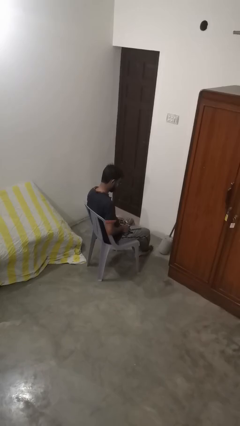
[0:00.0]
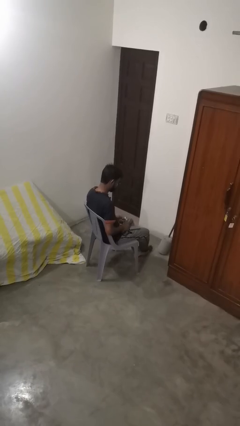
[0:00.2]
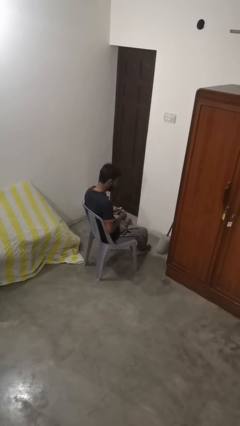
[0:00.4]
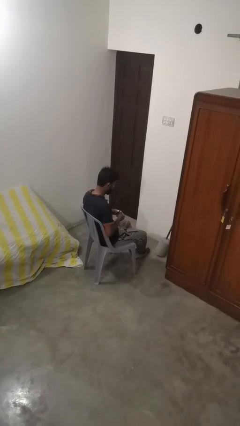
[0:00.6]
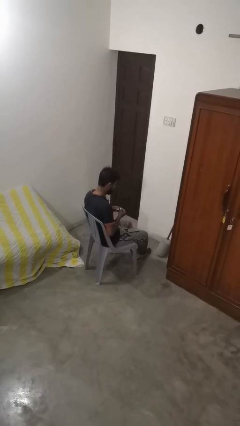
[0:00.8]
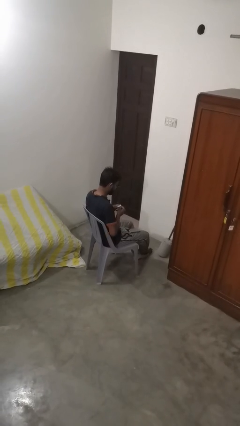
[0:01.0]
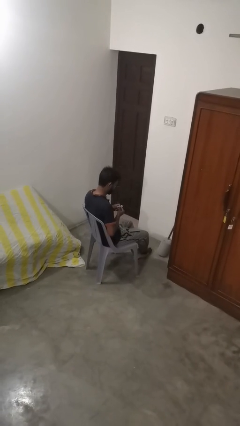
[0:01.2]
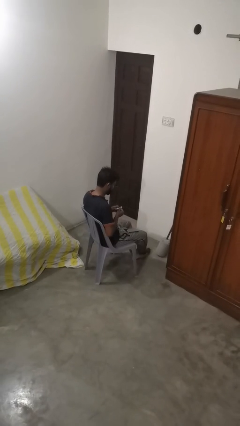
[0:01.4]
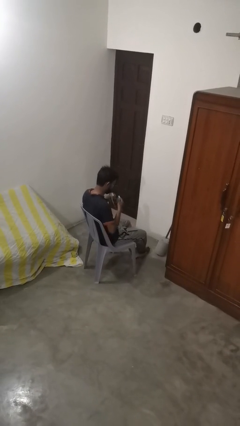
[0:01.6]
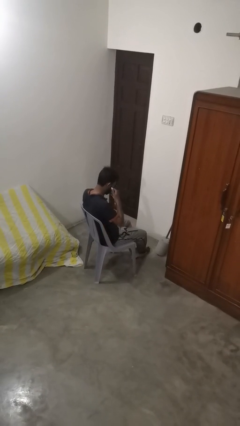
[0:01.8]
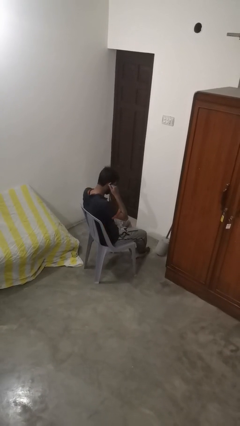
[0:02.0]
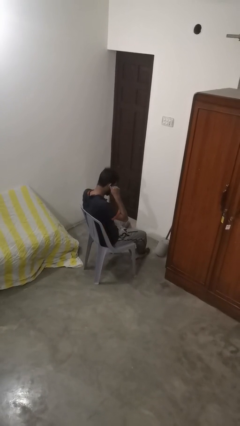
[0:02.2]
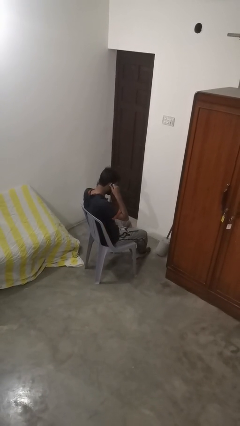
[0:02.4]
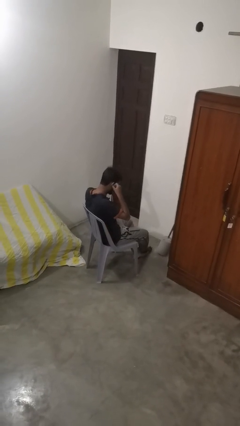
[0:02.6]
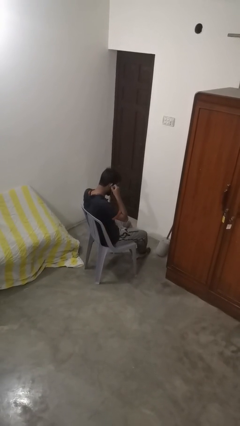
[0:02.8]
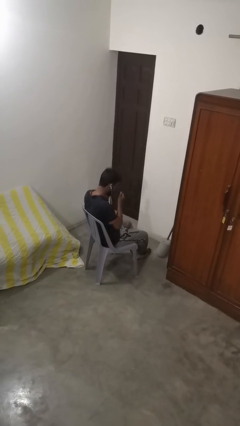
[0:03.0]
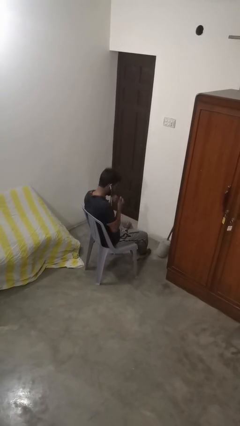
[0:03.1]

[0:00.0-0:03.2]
person puts on headphones

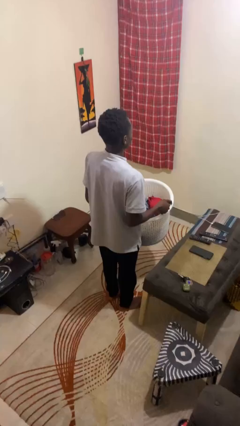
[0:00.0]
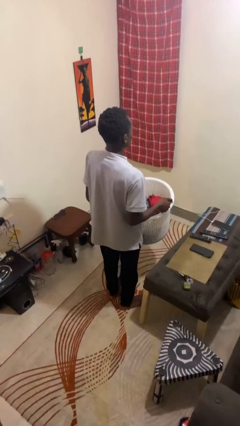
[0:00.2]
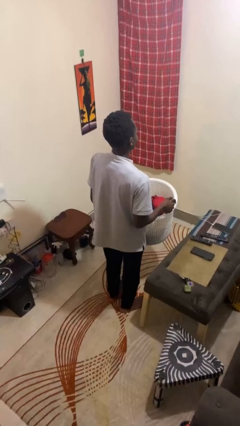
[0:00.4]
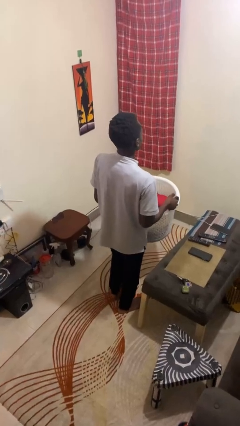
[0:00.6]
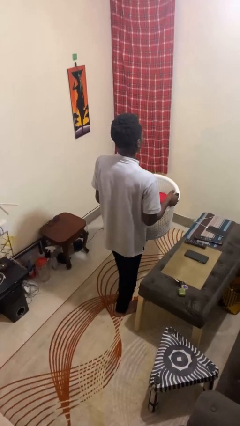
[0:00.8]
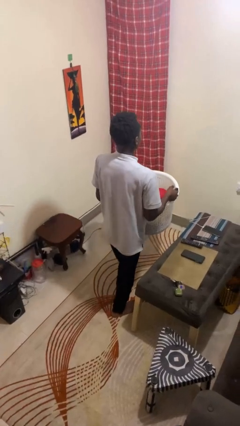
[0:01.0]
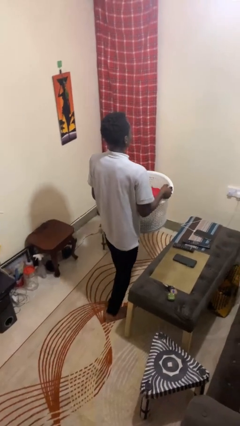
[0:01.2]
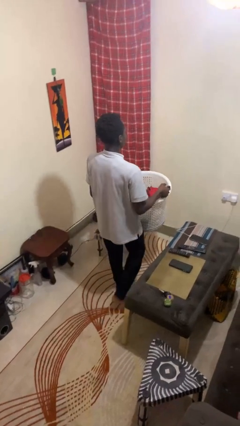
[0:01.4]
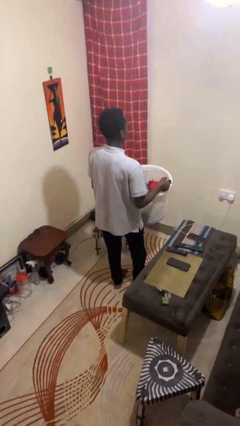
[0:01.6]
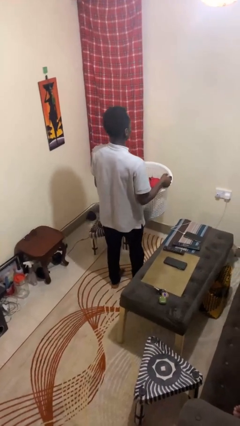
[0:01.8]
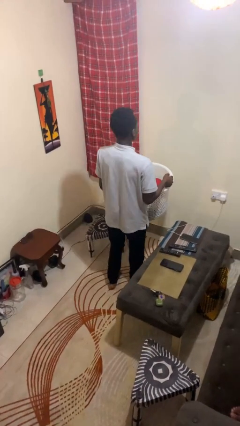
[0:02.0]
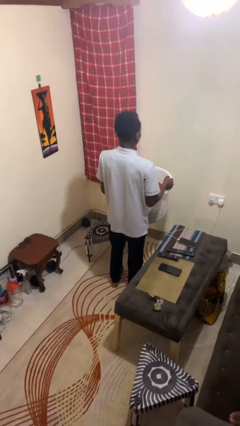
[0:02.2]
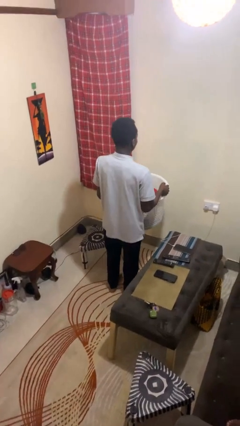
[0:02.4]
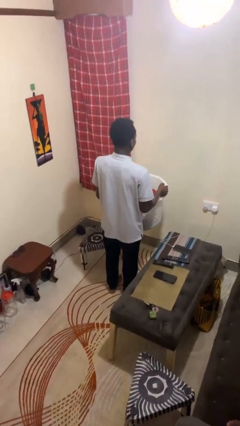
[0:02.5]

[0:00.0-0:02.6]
person carries laundry basket

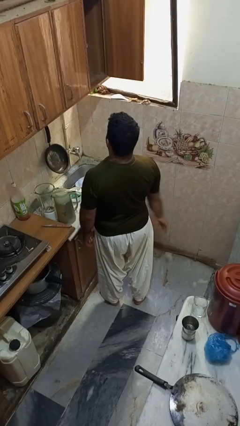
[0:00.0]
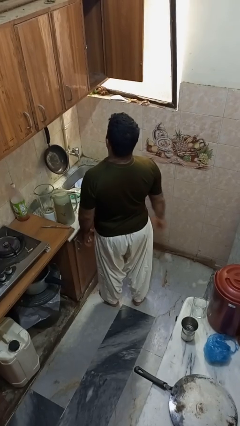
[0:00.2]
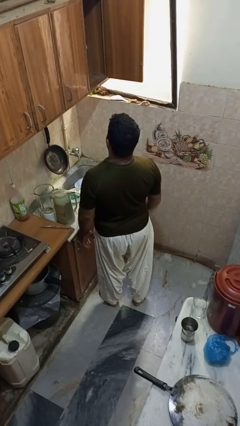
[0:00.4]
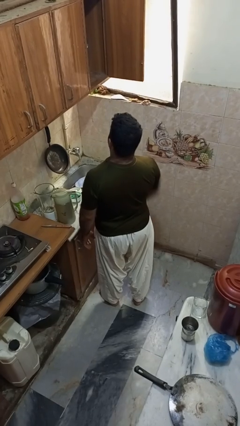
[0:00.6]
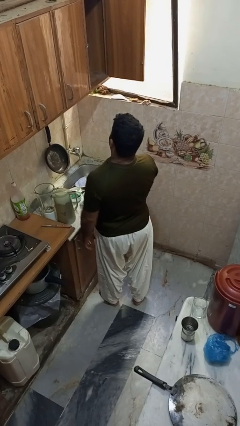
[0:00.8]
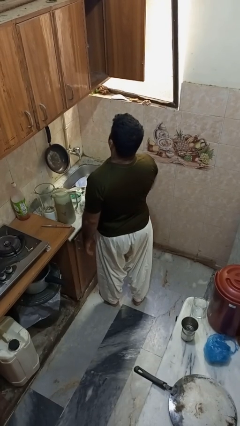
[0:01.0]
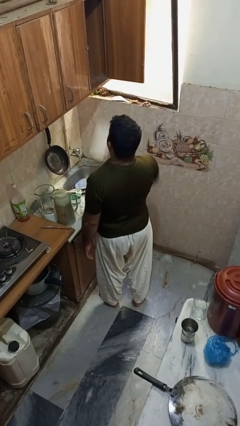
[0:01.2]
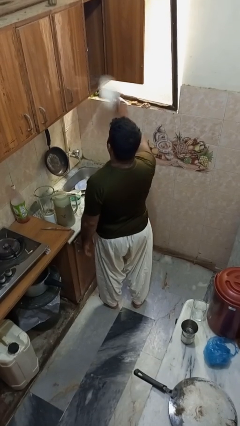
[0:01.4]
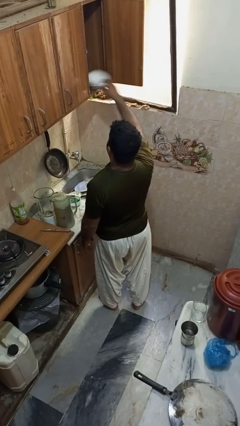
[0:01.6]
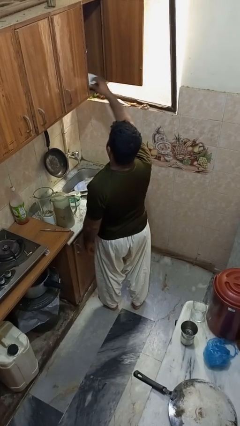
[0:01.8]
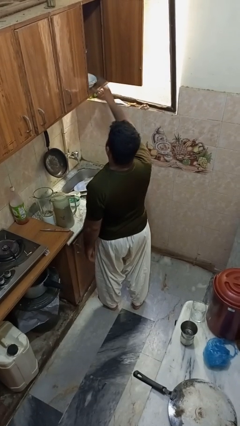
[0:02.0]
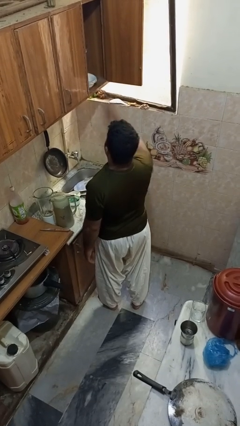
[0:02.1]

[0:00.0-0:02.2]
person puts object in cabinet

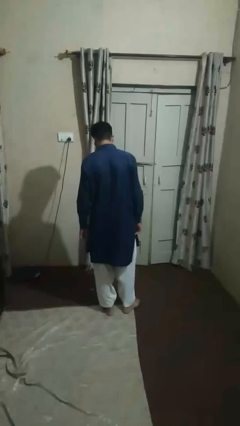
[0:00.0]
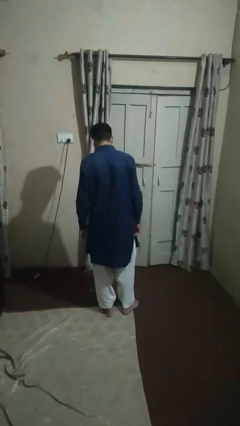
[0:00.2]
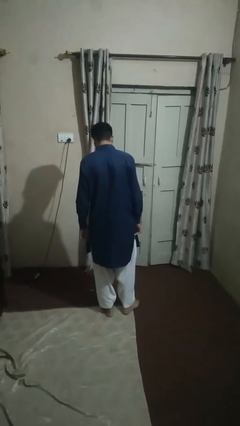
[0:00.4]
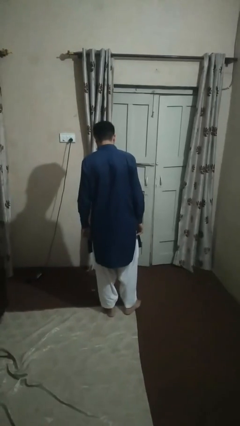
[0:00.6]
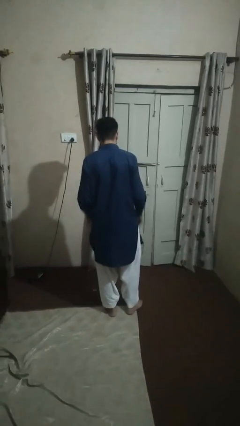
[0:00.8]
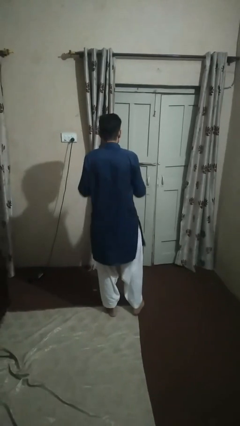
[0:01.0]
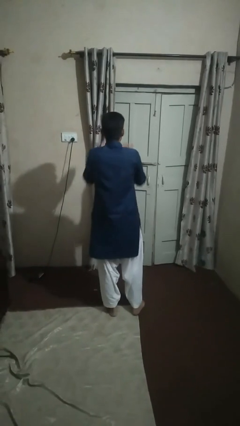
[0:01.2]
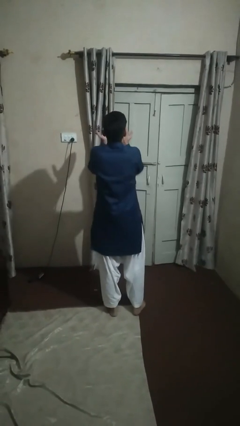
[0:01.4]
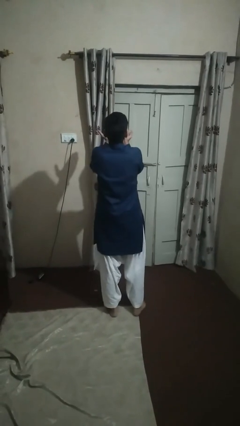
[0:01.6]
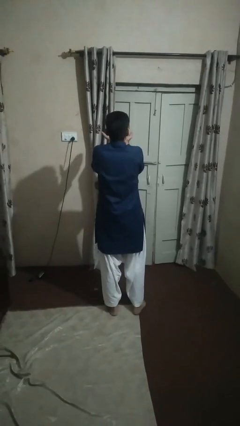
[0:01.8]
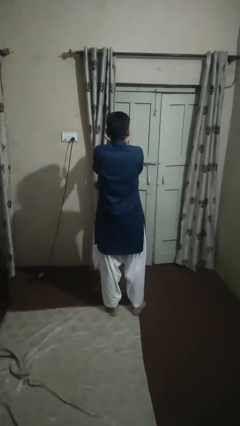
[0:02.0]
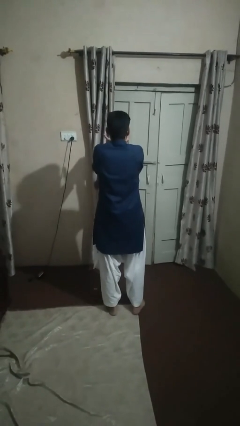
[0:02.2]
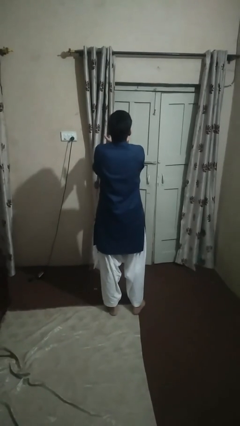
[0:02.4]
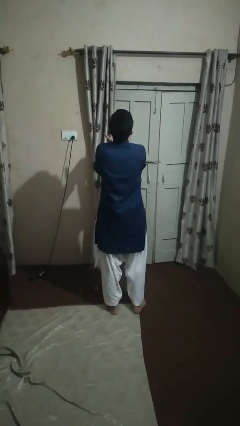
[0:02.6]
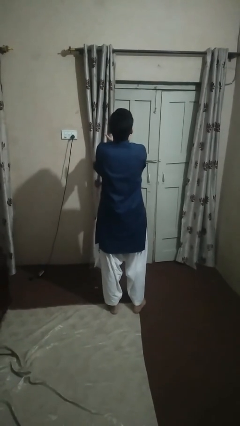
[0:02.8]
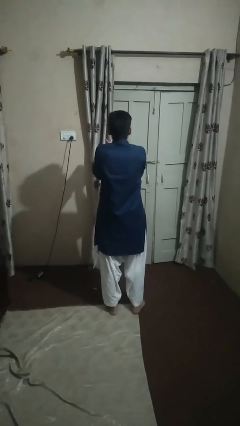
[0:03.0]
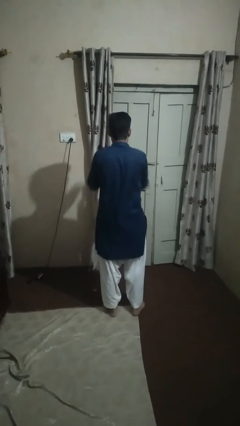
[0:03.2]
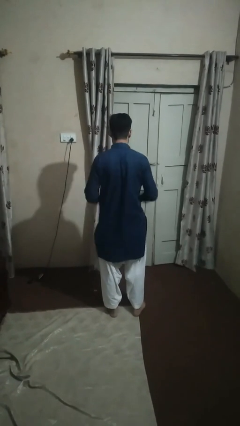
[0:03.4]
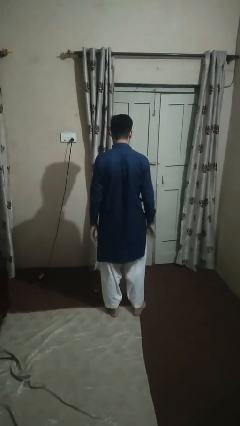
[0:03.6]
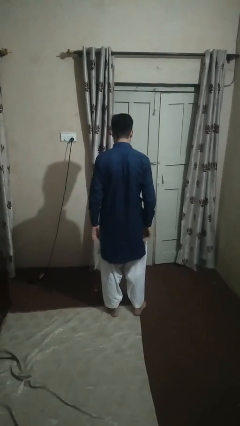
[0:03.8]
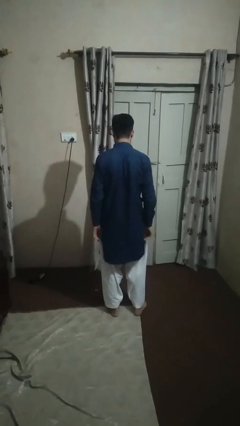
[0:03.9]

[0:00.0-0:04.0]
person prays

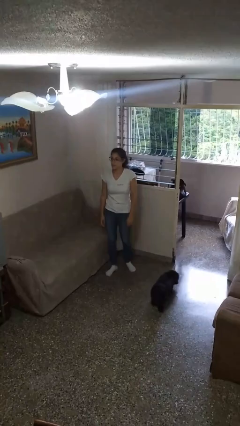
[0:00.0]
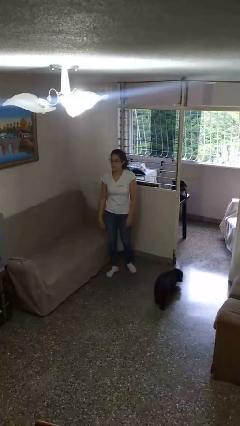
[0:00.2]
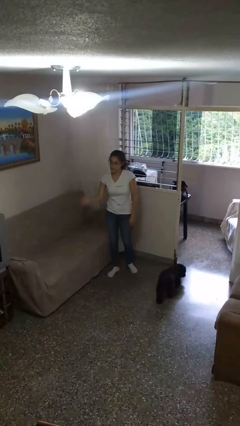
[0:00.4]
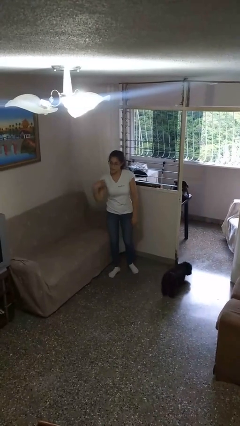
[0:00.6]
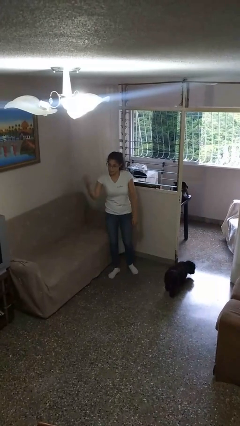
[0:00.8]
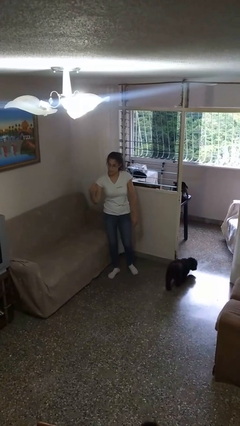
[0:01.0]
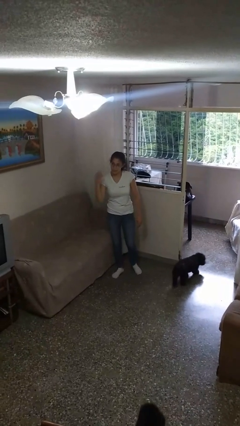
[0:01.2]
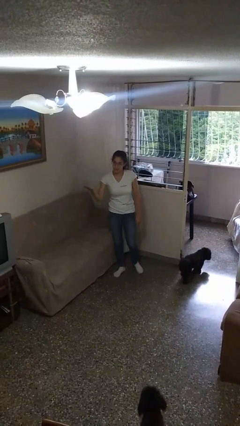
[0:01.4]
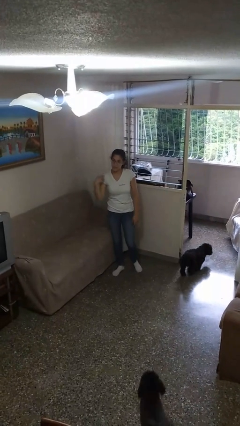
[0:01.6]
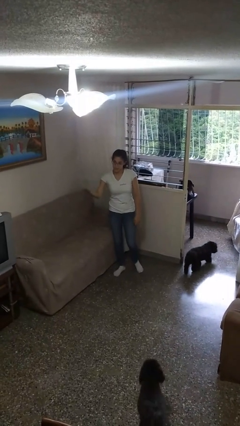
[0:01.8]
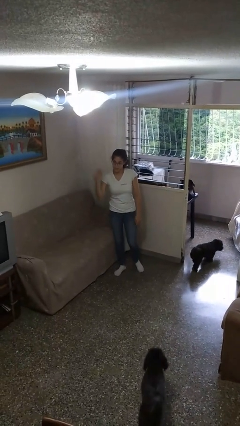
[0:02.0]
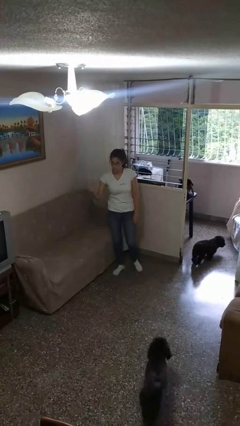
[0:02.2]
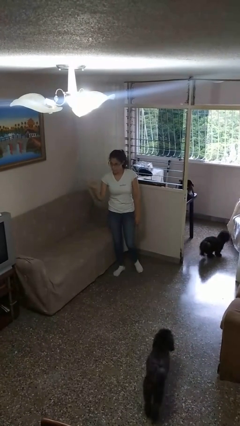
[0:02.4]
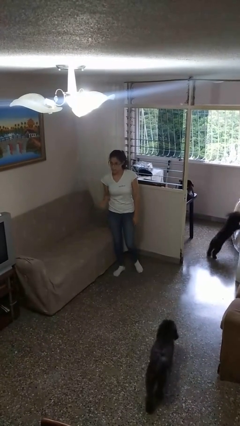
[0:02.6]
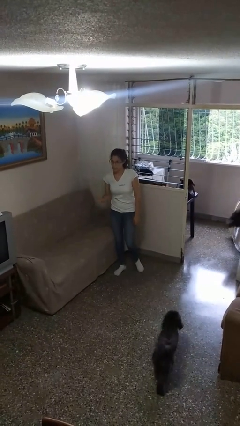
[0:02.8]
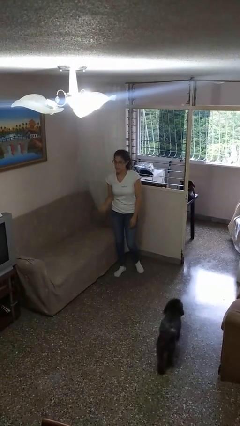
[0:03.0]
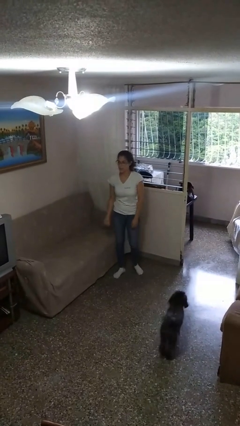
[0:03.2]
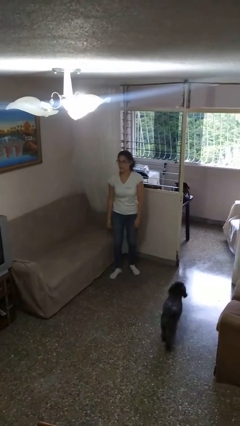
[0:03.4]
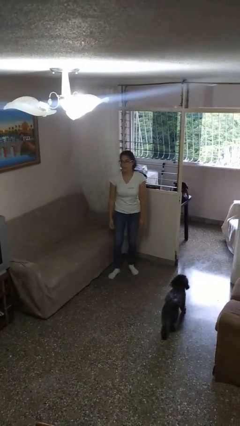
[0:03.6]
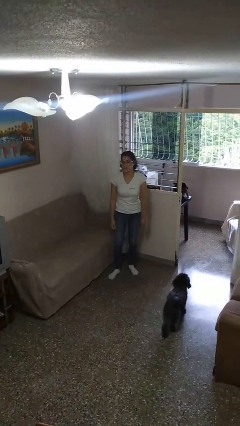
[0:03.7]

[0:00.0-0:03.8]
person gestures come here

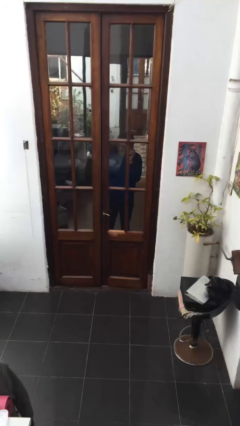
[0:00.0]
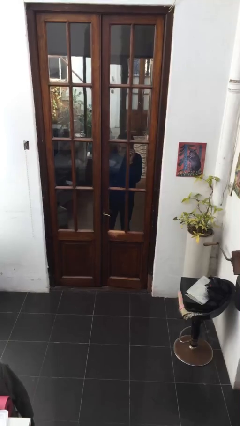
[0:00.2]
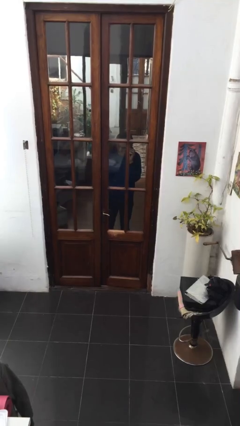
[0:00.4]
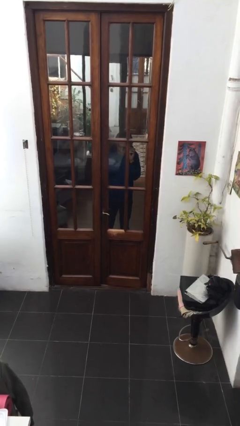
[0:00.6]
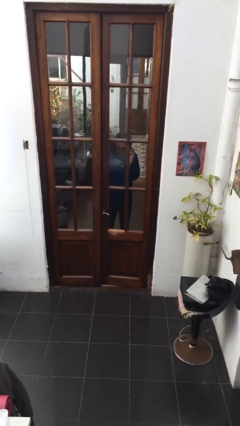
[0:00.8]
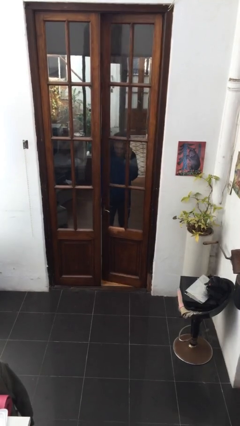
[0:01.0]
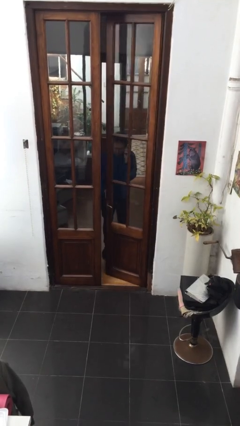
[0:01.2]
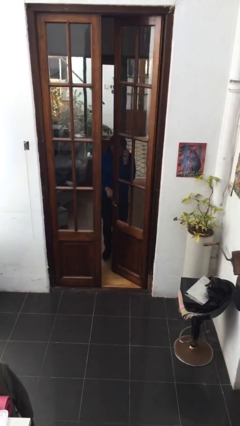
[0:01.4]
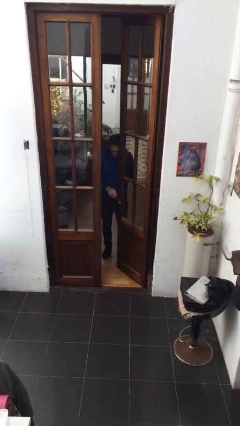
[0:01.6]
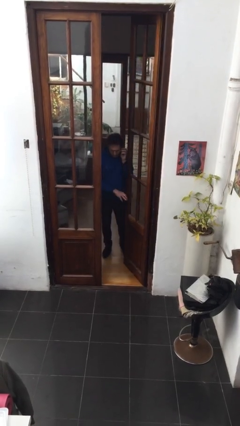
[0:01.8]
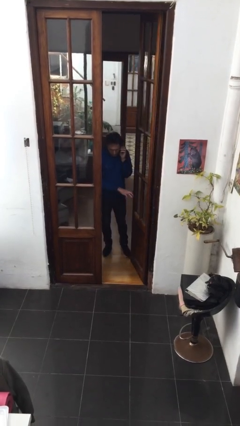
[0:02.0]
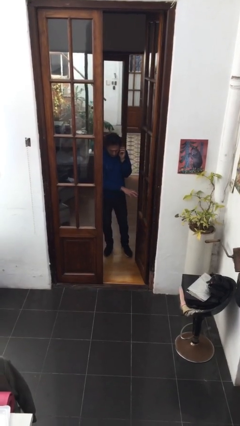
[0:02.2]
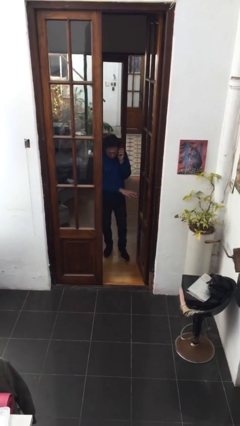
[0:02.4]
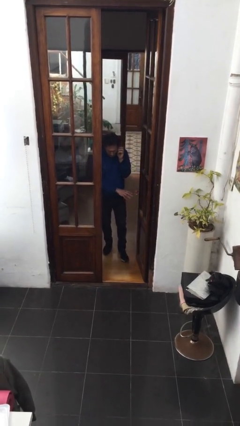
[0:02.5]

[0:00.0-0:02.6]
person opens facility door
